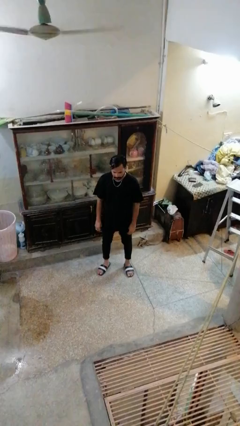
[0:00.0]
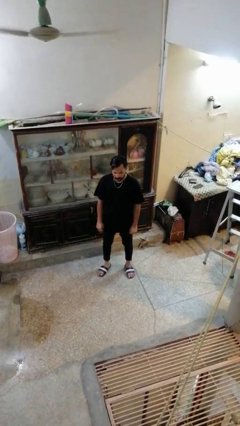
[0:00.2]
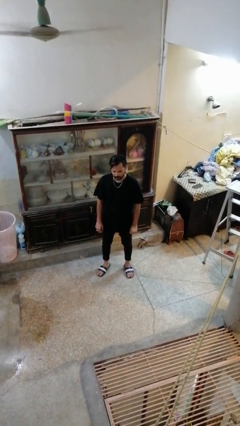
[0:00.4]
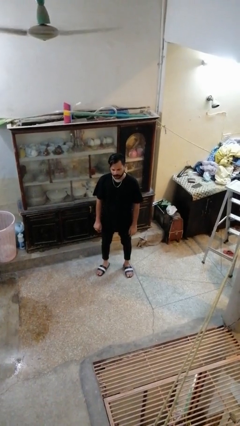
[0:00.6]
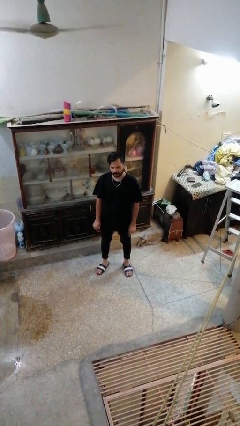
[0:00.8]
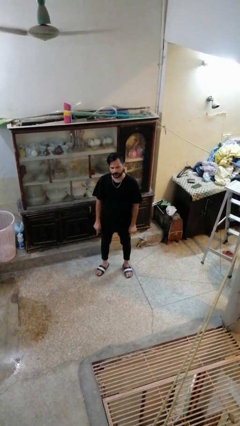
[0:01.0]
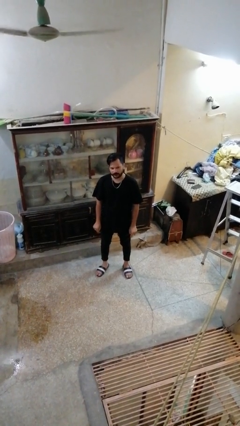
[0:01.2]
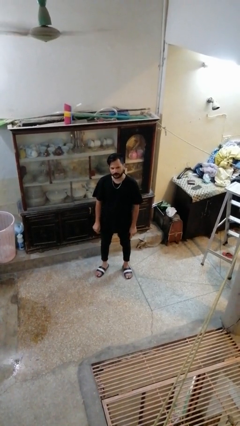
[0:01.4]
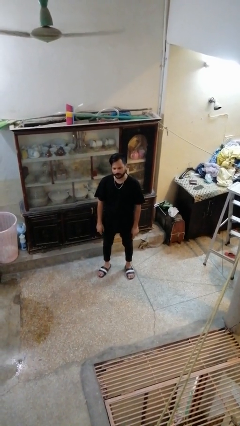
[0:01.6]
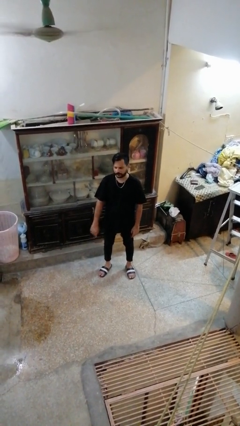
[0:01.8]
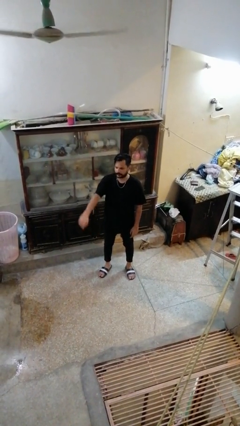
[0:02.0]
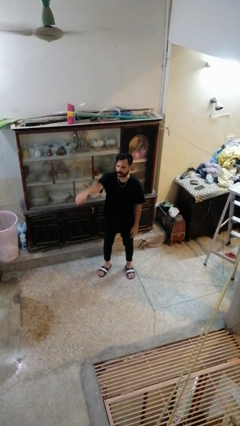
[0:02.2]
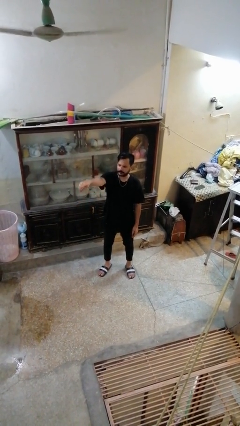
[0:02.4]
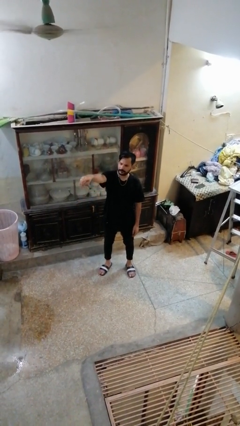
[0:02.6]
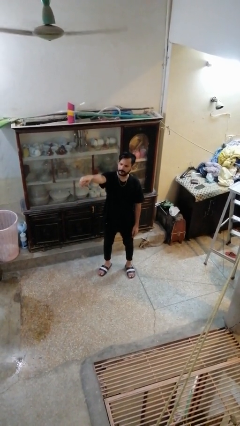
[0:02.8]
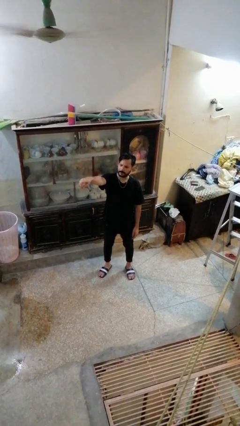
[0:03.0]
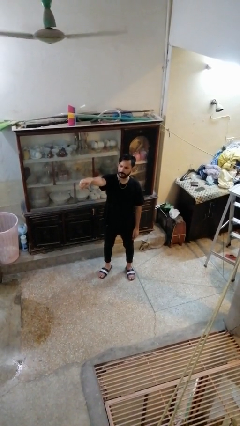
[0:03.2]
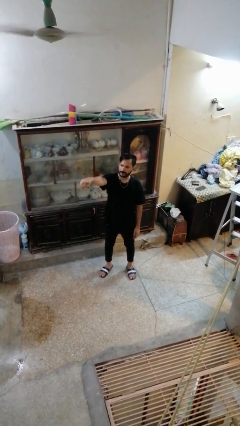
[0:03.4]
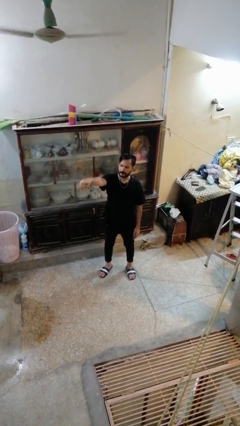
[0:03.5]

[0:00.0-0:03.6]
person points at person

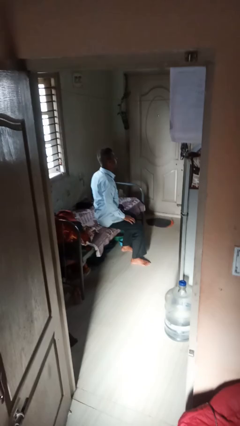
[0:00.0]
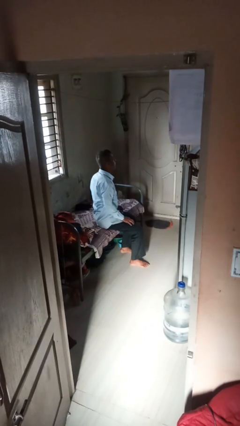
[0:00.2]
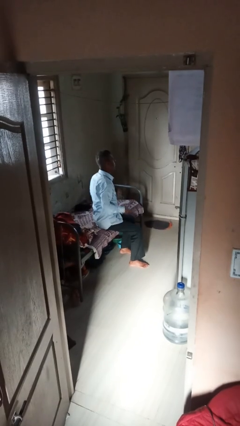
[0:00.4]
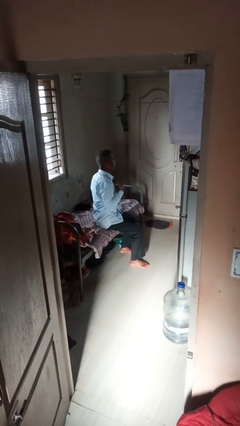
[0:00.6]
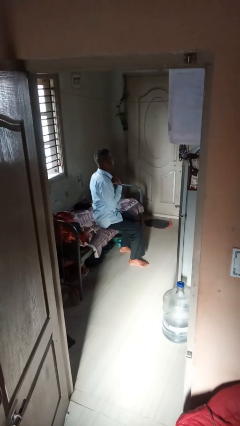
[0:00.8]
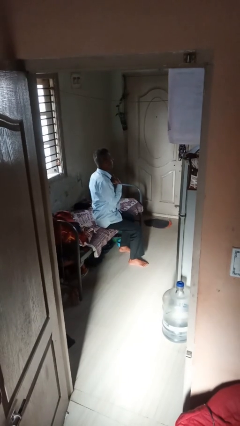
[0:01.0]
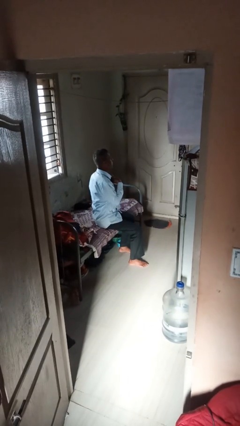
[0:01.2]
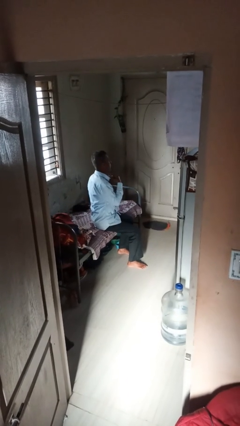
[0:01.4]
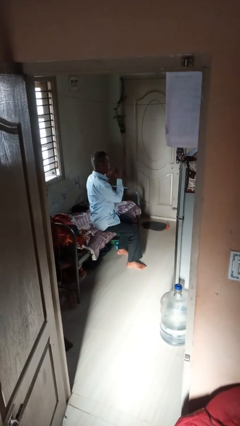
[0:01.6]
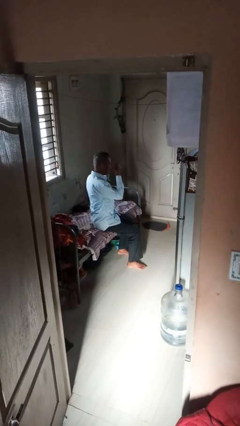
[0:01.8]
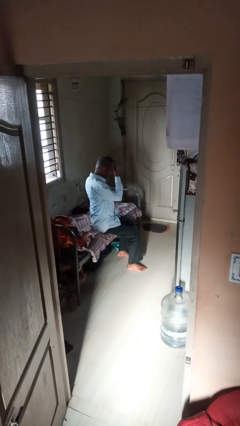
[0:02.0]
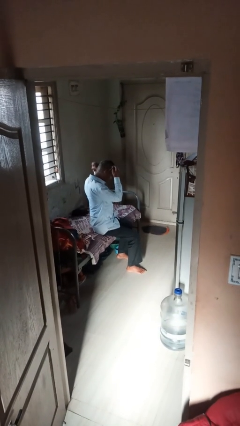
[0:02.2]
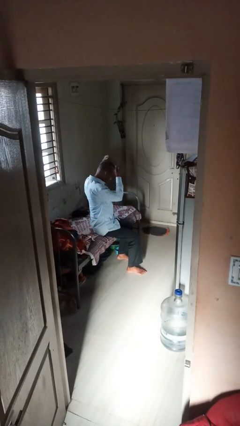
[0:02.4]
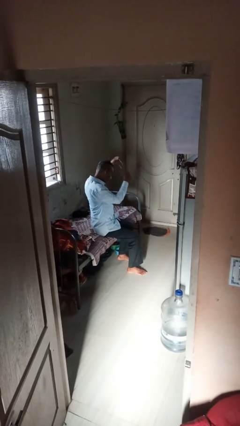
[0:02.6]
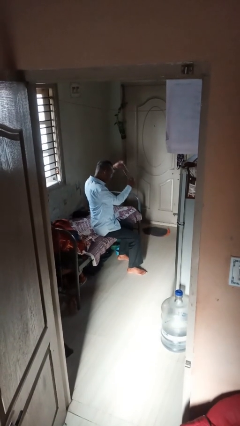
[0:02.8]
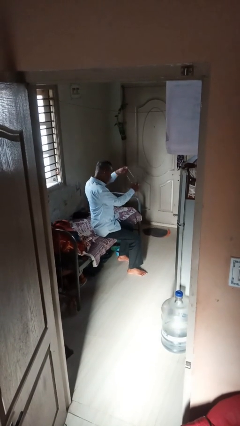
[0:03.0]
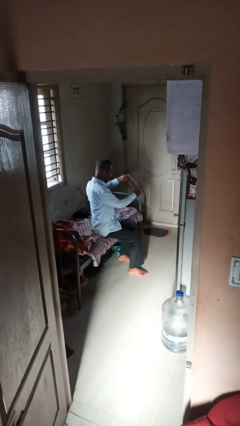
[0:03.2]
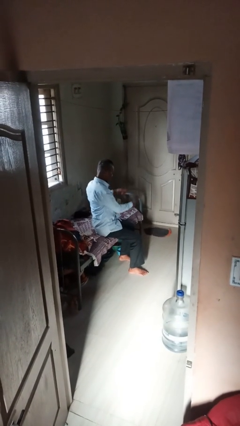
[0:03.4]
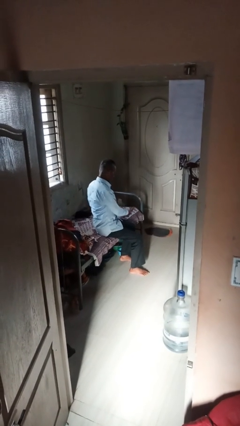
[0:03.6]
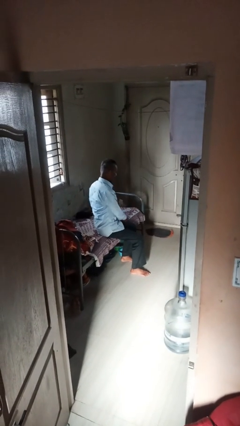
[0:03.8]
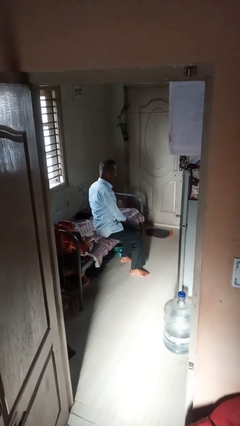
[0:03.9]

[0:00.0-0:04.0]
person takes off necklace

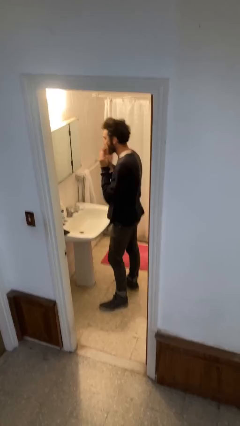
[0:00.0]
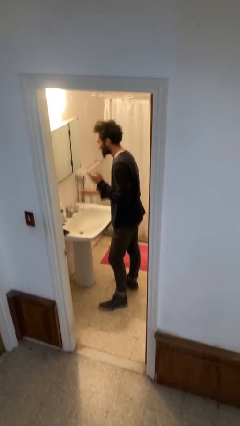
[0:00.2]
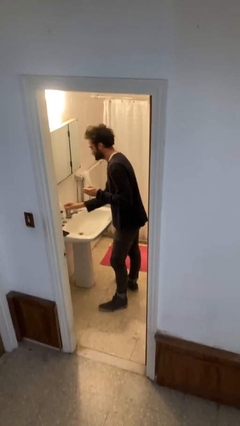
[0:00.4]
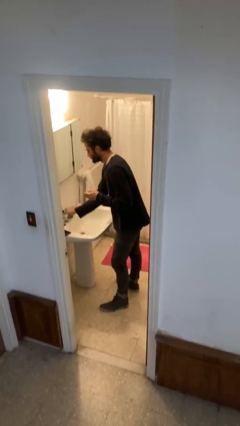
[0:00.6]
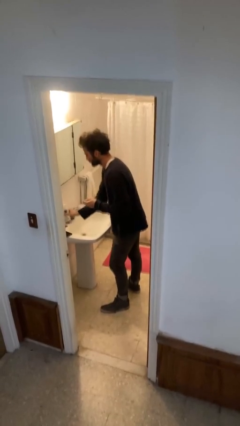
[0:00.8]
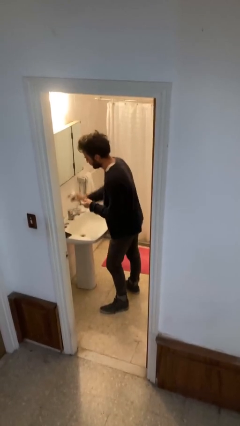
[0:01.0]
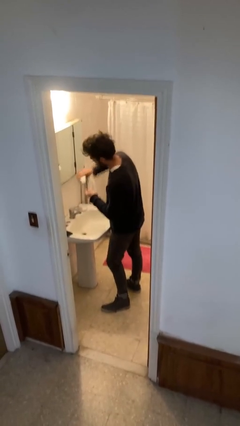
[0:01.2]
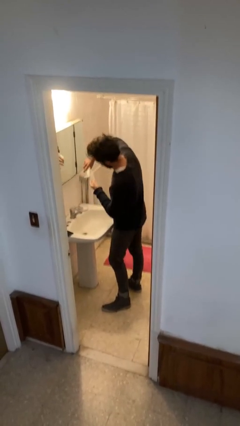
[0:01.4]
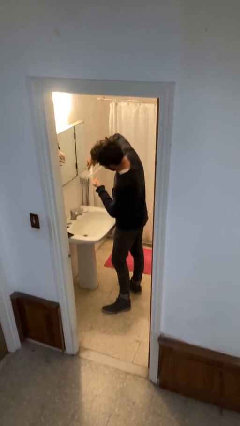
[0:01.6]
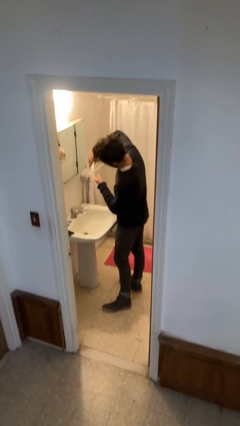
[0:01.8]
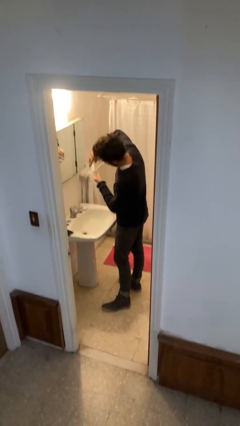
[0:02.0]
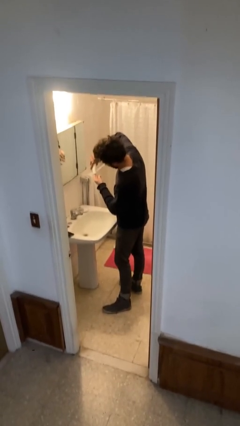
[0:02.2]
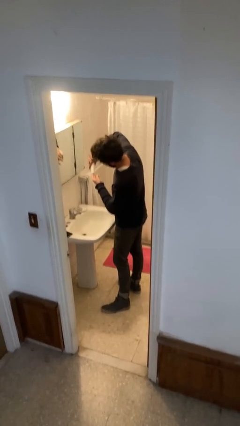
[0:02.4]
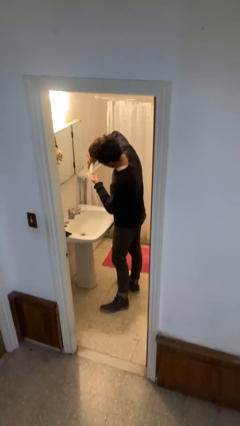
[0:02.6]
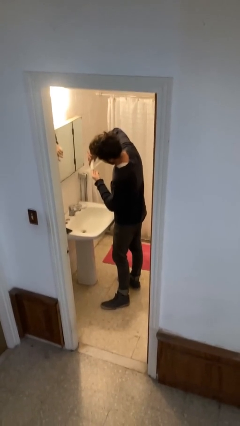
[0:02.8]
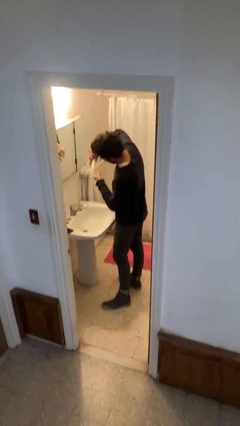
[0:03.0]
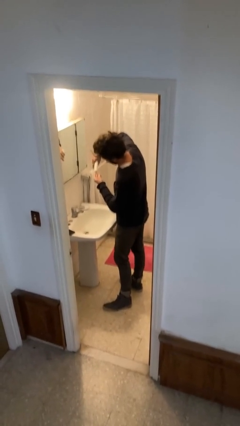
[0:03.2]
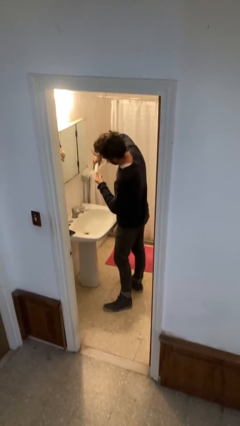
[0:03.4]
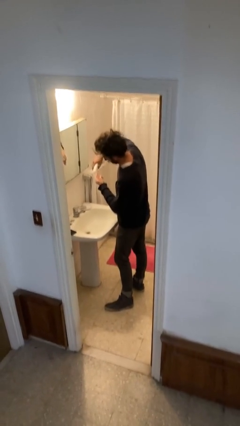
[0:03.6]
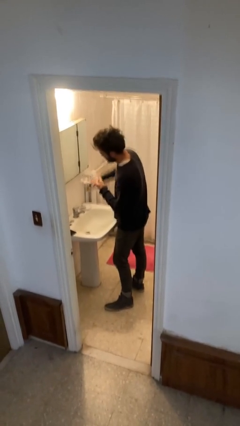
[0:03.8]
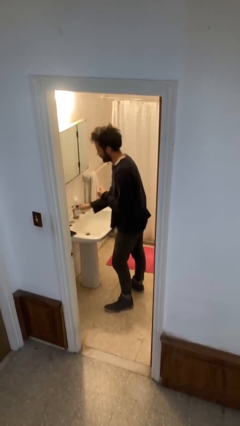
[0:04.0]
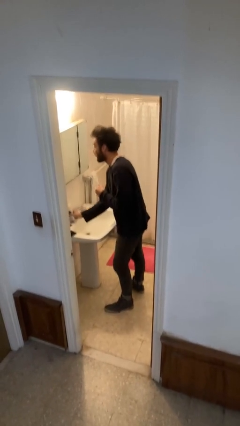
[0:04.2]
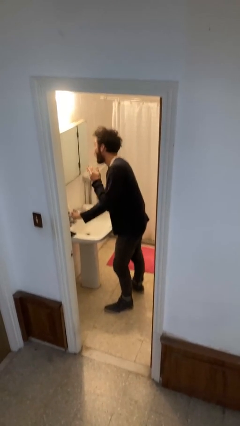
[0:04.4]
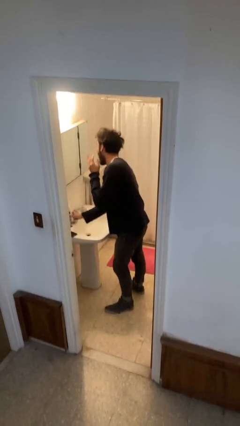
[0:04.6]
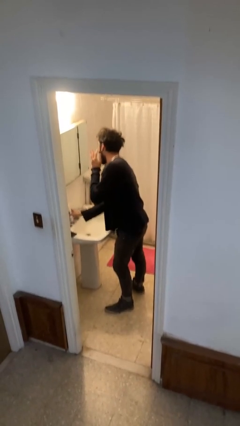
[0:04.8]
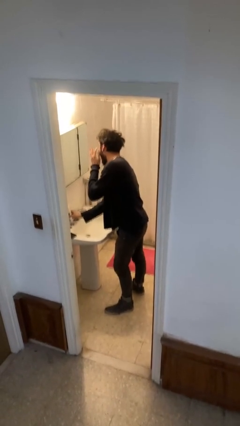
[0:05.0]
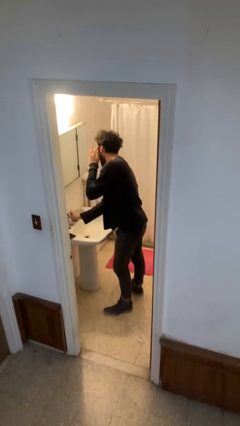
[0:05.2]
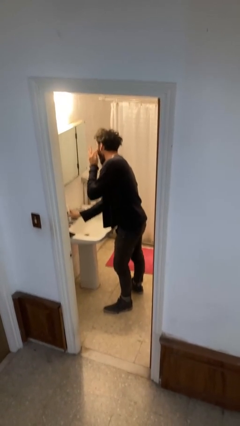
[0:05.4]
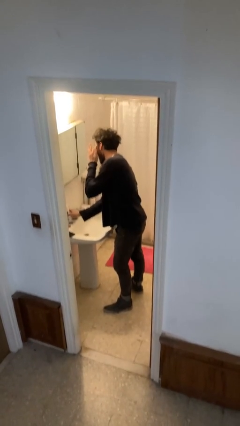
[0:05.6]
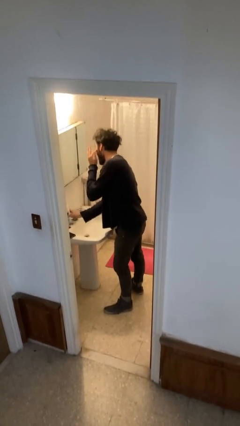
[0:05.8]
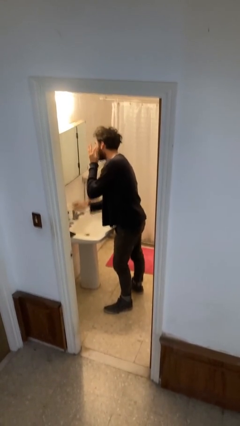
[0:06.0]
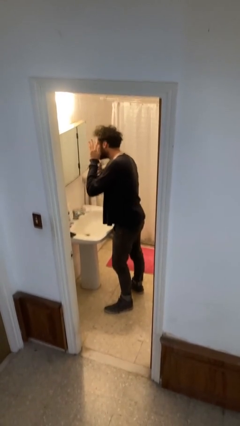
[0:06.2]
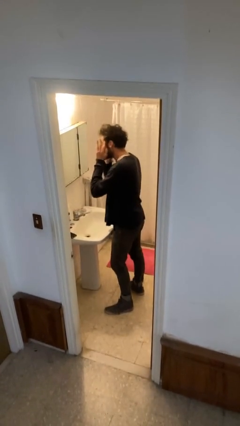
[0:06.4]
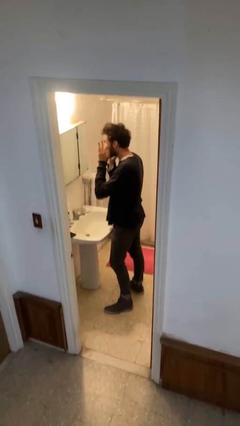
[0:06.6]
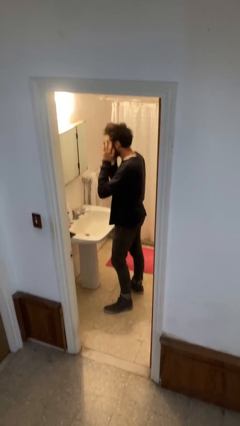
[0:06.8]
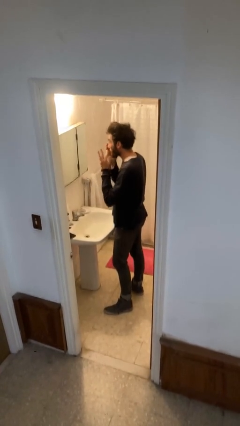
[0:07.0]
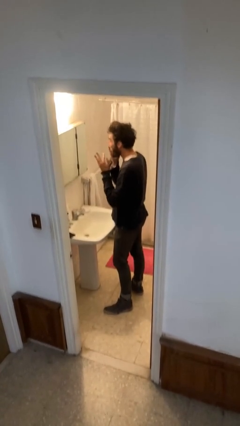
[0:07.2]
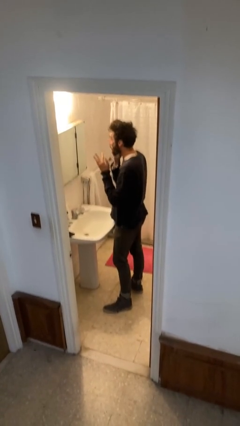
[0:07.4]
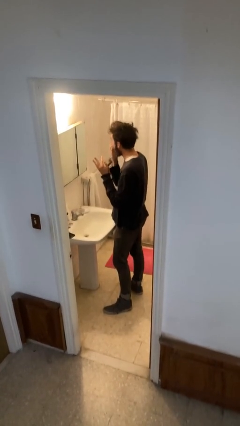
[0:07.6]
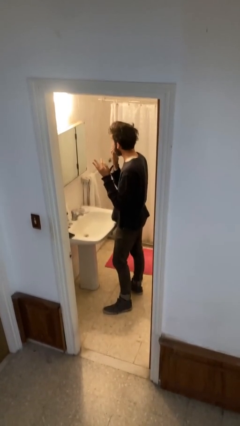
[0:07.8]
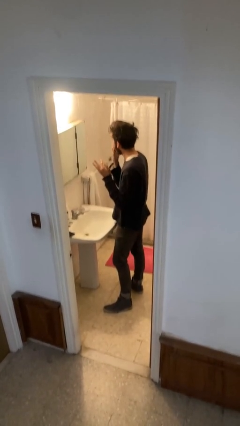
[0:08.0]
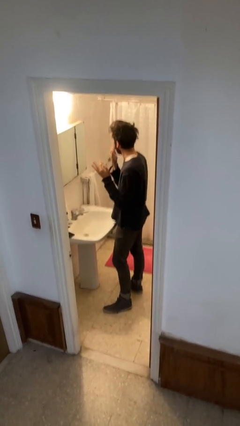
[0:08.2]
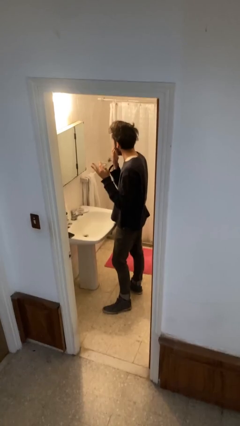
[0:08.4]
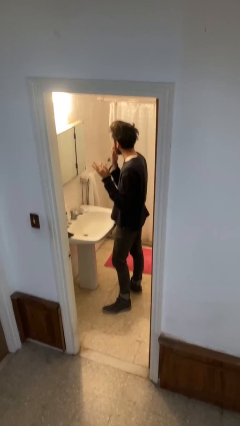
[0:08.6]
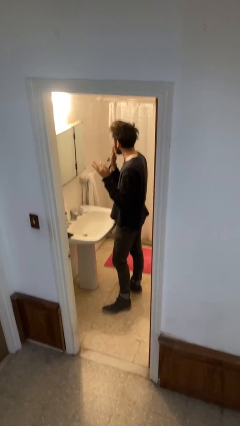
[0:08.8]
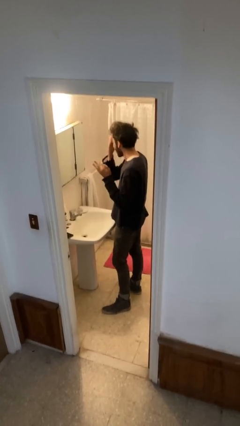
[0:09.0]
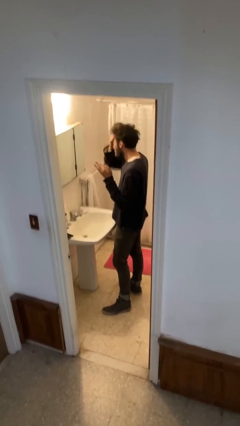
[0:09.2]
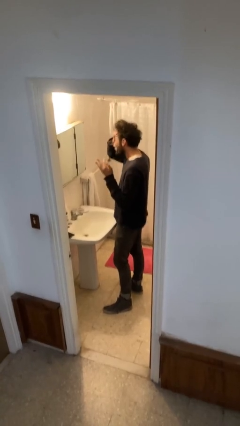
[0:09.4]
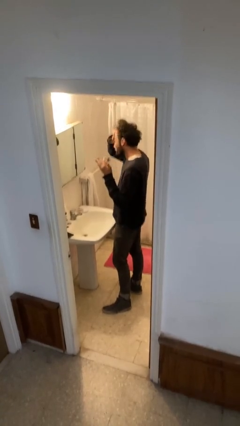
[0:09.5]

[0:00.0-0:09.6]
person applies facial moisturizer

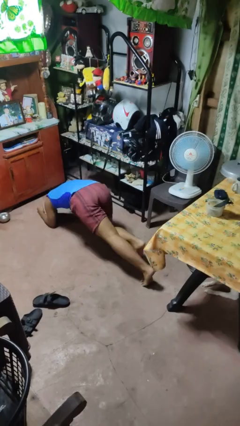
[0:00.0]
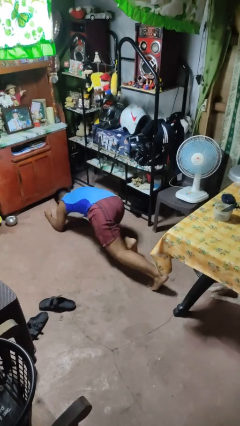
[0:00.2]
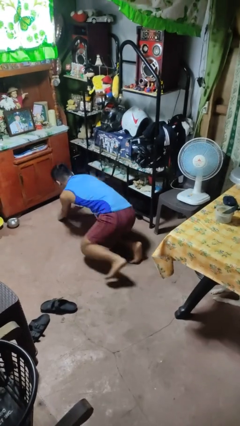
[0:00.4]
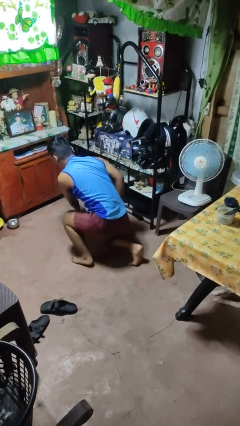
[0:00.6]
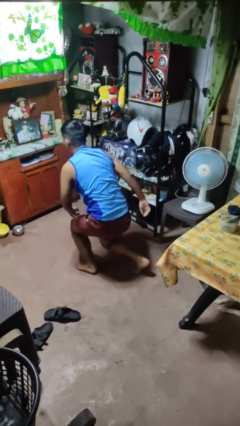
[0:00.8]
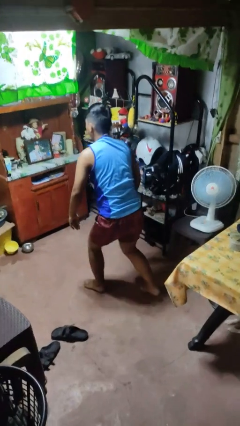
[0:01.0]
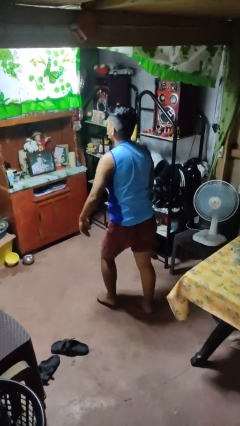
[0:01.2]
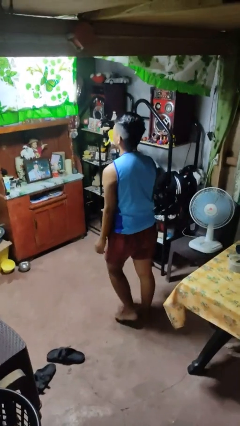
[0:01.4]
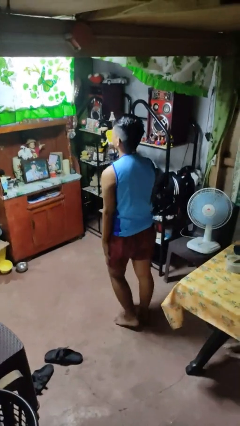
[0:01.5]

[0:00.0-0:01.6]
person stands up from floor
